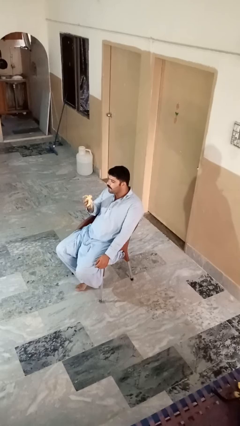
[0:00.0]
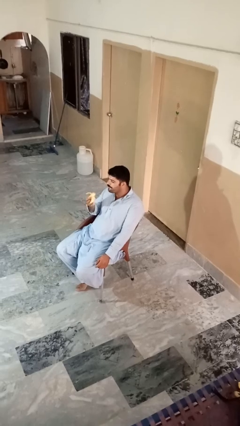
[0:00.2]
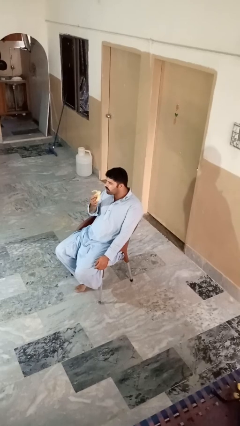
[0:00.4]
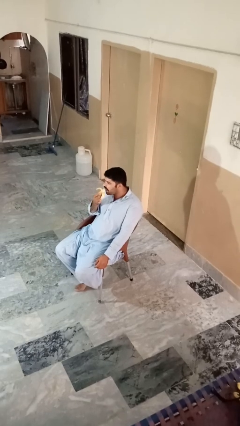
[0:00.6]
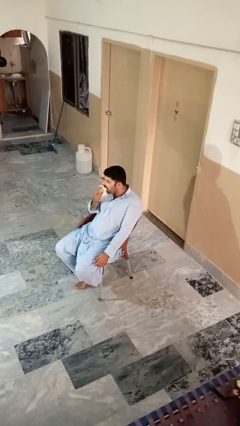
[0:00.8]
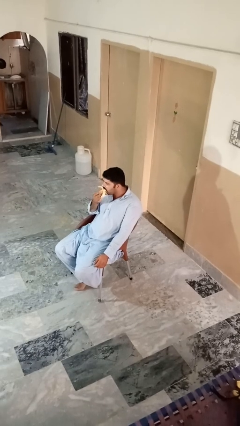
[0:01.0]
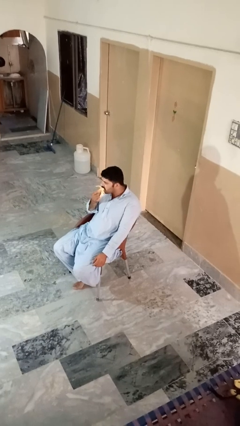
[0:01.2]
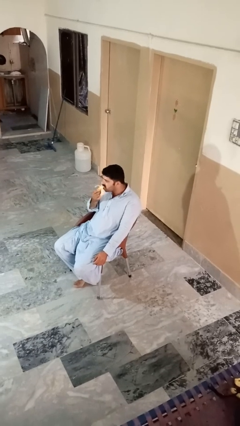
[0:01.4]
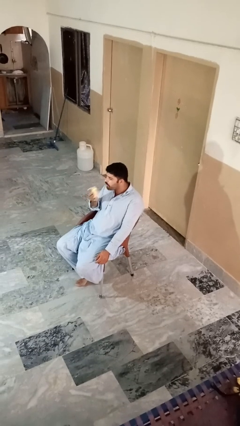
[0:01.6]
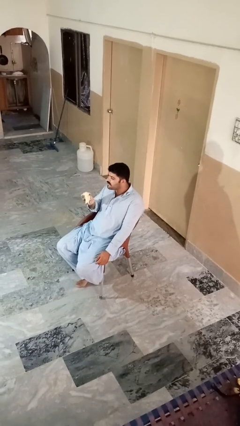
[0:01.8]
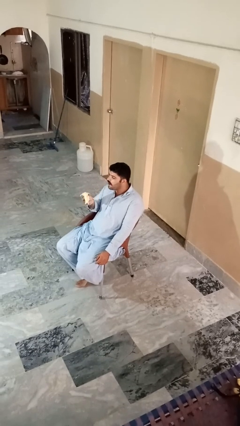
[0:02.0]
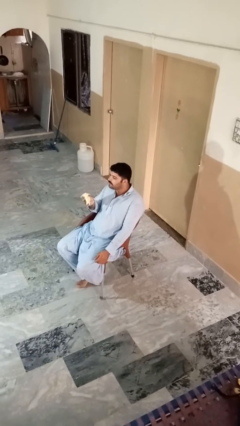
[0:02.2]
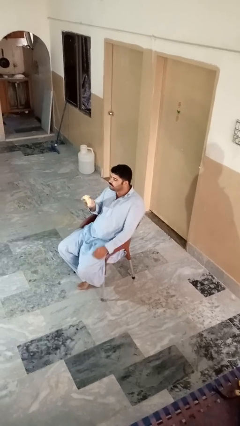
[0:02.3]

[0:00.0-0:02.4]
person eats banana

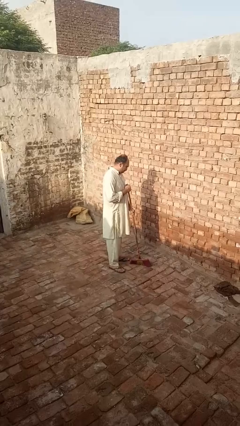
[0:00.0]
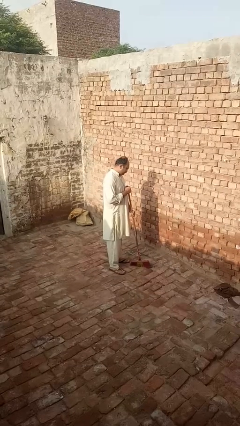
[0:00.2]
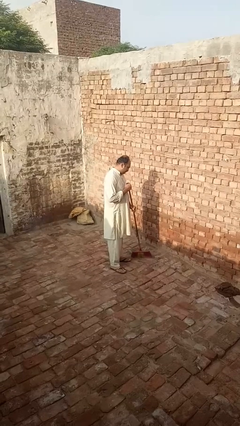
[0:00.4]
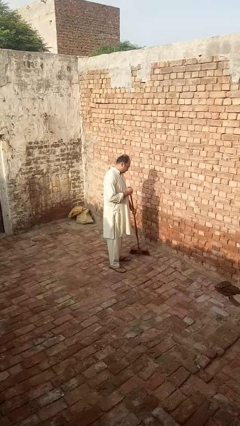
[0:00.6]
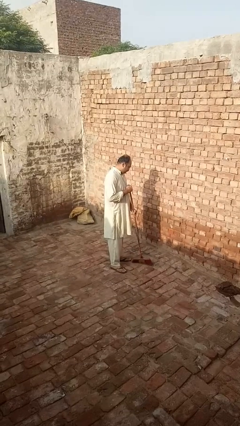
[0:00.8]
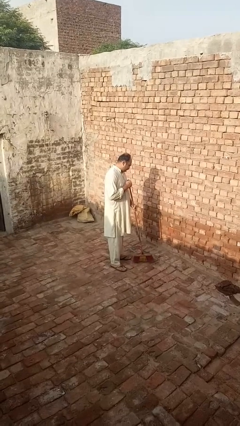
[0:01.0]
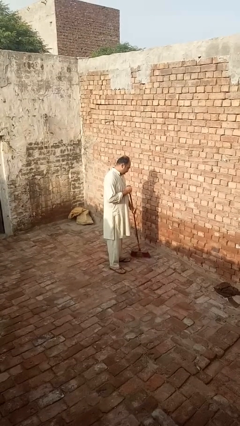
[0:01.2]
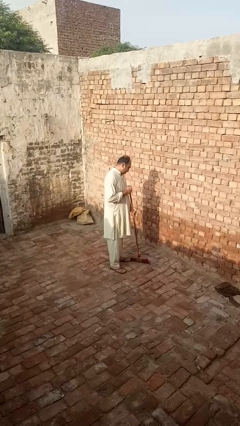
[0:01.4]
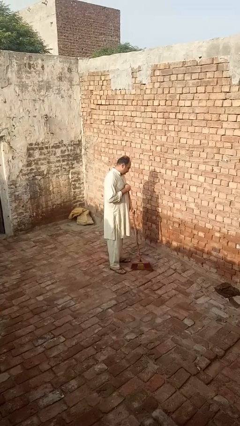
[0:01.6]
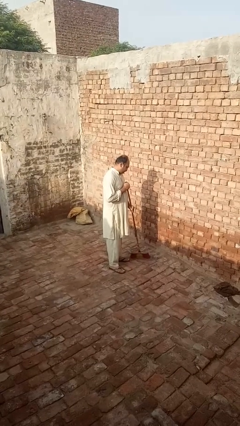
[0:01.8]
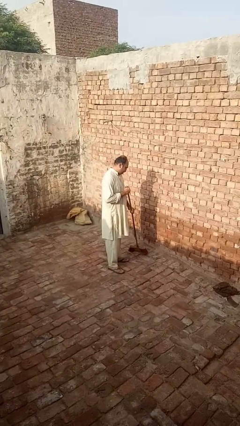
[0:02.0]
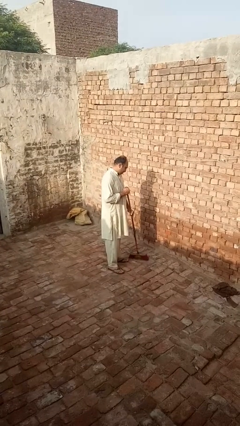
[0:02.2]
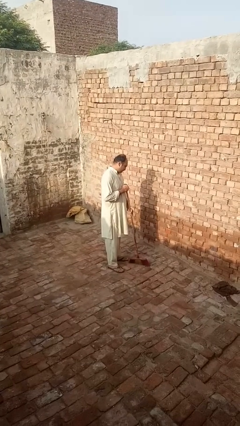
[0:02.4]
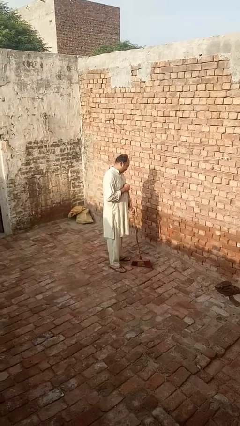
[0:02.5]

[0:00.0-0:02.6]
person sweeps floor

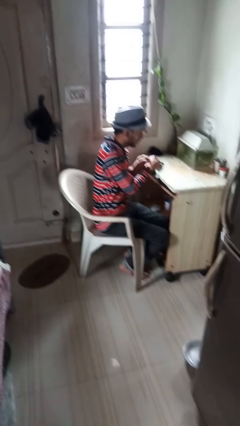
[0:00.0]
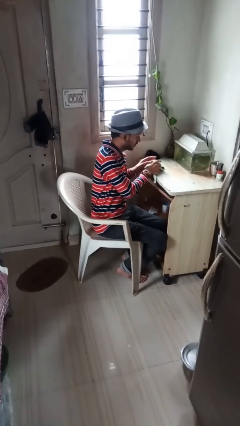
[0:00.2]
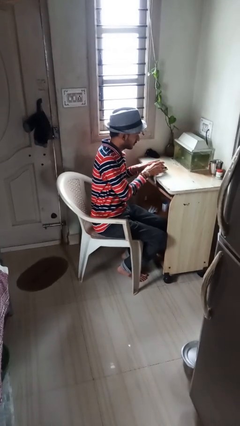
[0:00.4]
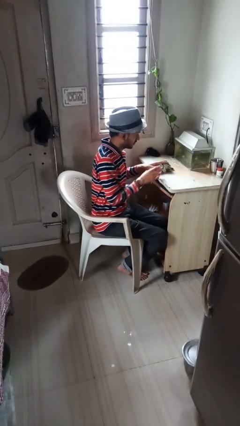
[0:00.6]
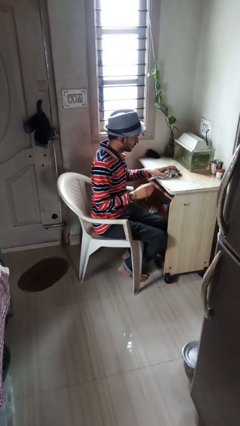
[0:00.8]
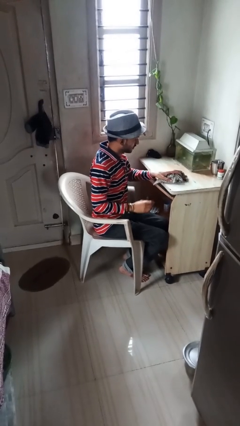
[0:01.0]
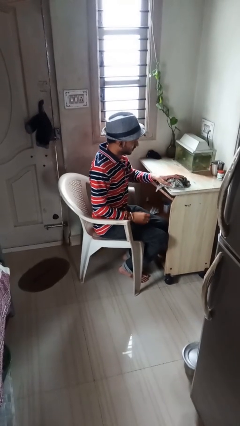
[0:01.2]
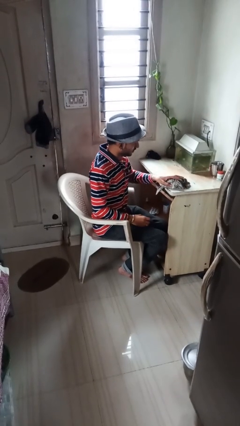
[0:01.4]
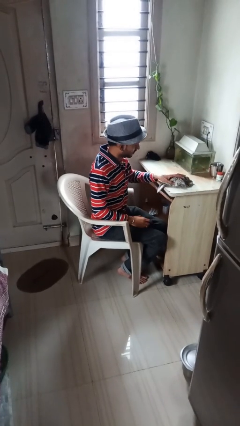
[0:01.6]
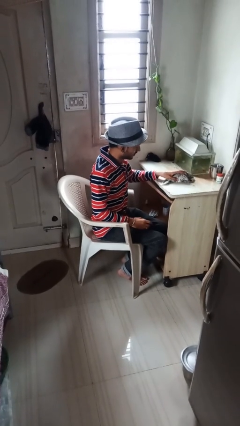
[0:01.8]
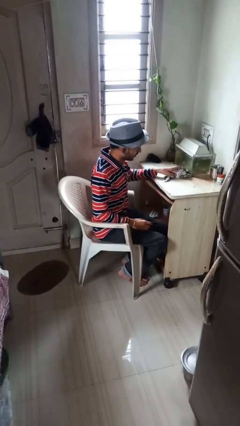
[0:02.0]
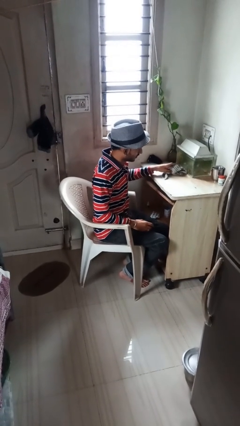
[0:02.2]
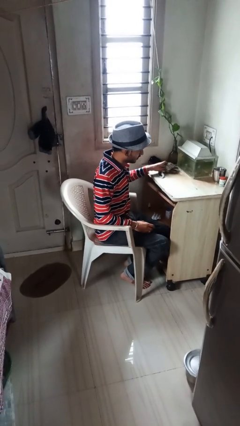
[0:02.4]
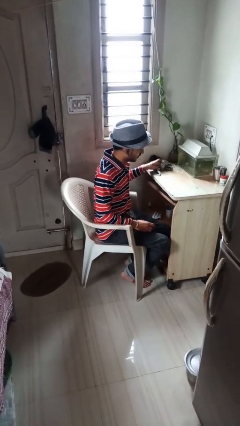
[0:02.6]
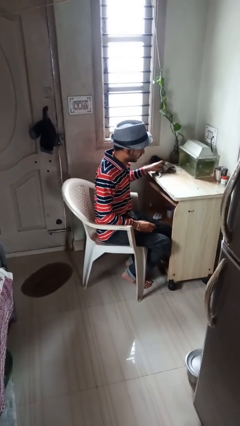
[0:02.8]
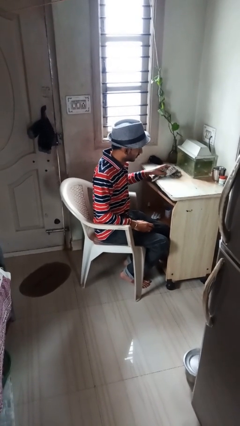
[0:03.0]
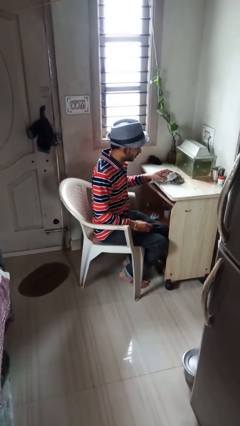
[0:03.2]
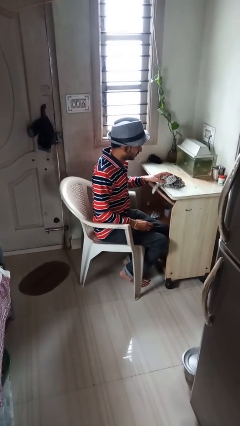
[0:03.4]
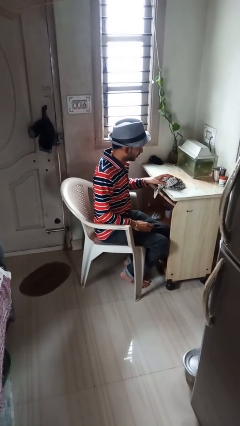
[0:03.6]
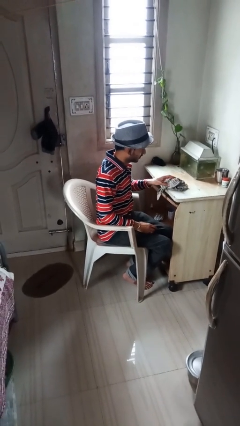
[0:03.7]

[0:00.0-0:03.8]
person cleans table with rag

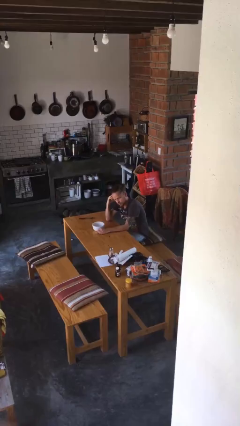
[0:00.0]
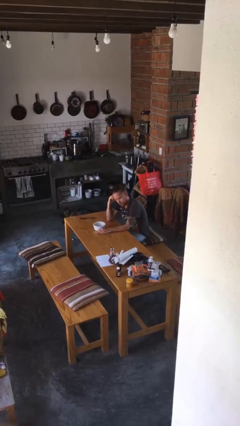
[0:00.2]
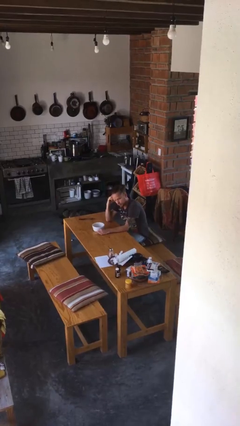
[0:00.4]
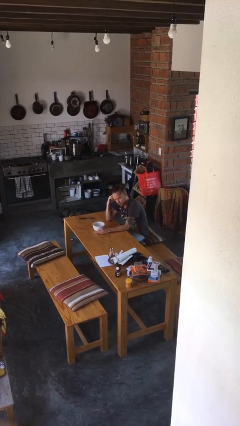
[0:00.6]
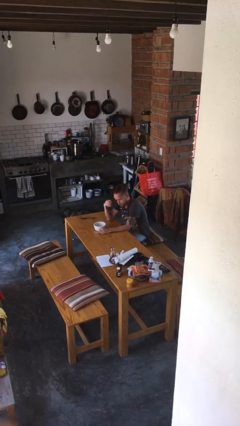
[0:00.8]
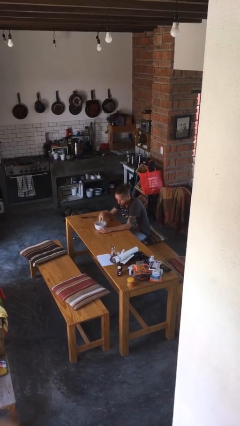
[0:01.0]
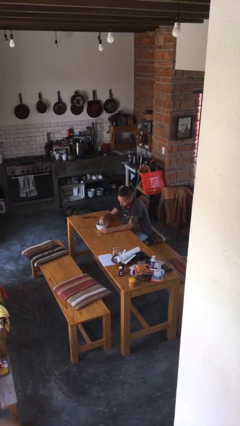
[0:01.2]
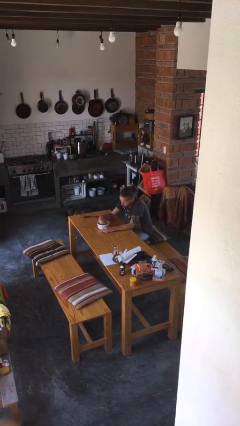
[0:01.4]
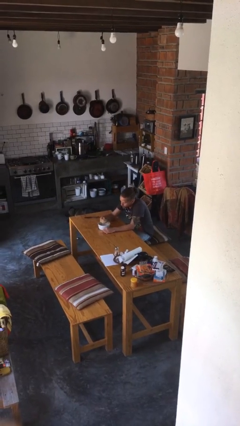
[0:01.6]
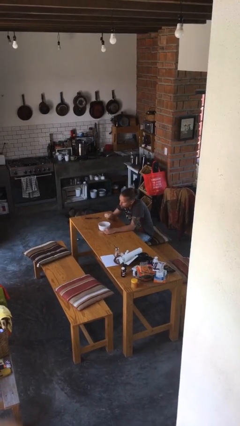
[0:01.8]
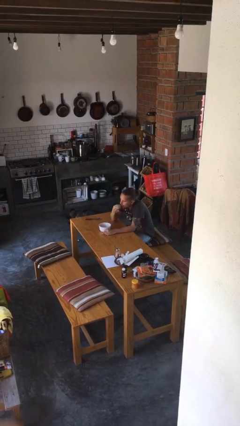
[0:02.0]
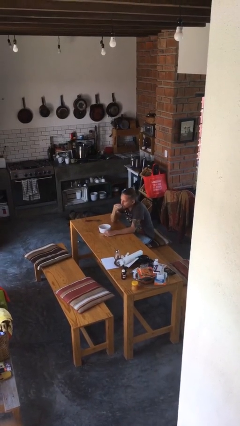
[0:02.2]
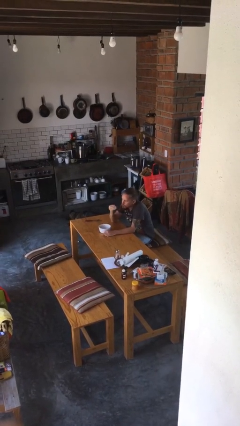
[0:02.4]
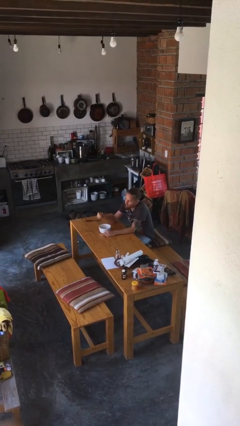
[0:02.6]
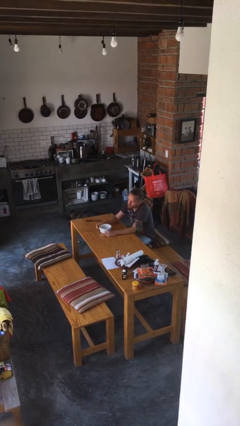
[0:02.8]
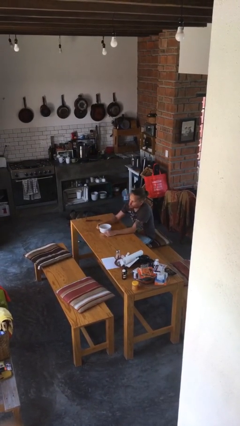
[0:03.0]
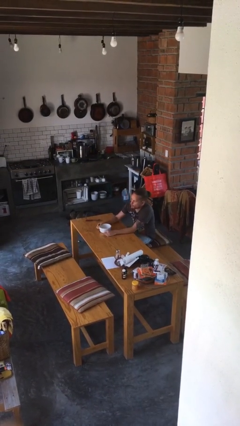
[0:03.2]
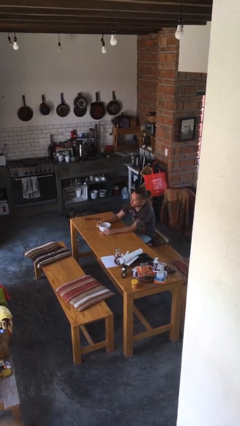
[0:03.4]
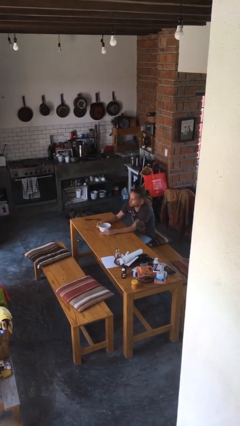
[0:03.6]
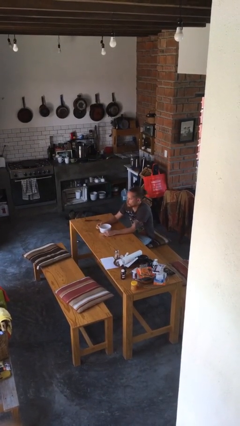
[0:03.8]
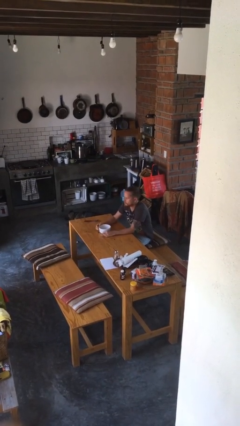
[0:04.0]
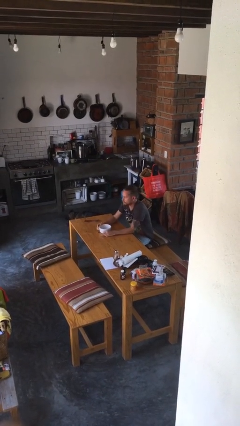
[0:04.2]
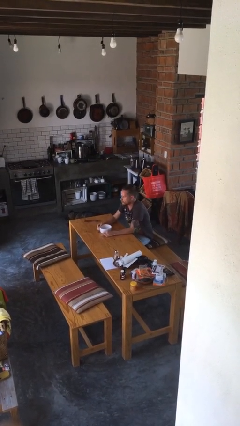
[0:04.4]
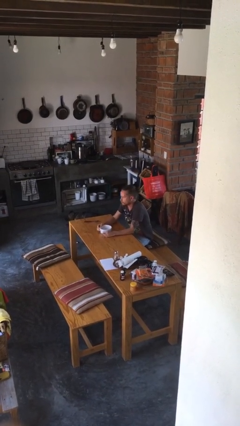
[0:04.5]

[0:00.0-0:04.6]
person eats with hands

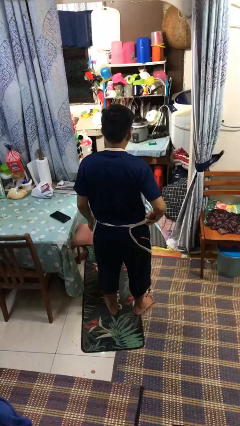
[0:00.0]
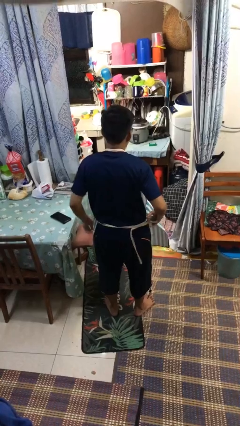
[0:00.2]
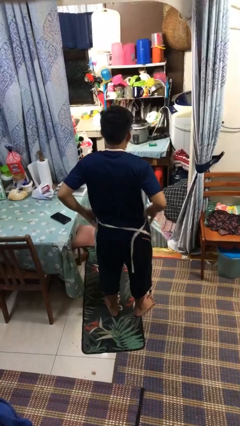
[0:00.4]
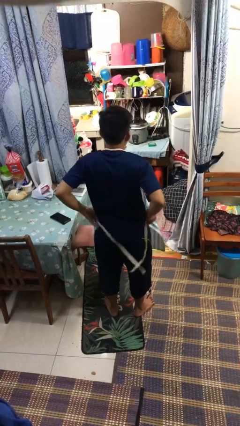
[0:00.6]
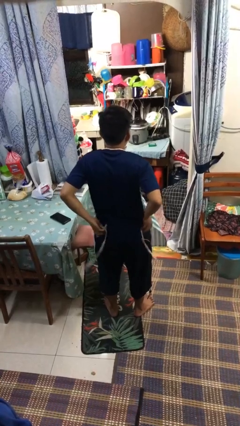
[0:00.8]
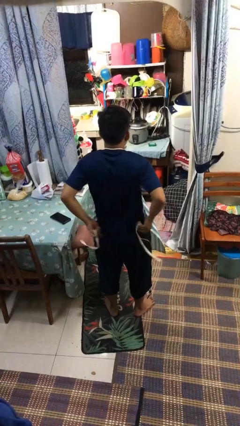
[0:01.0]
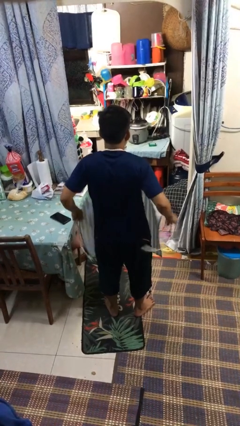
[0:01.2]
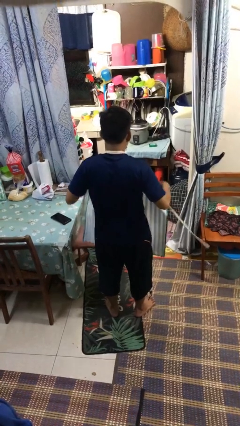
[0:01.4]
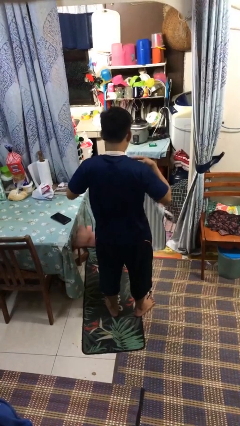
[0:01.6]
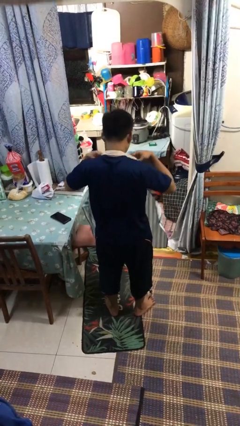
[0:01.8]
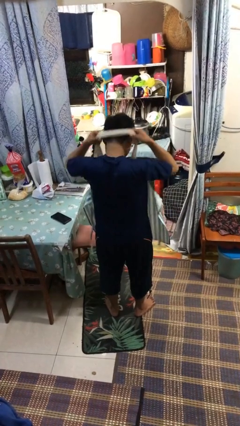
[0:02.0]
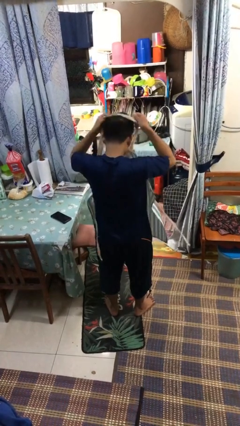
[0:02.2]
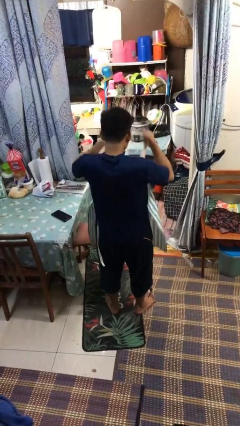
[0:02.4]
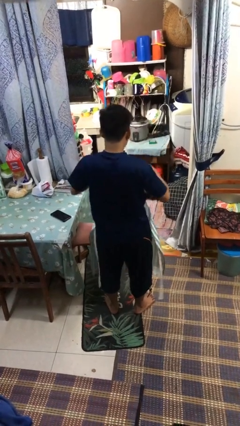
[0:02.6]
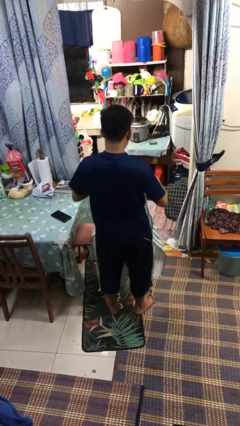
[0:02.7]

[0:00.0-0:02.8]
person takes off apron

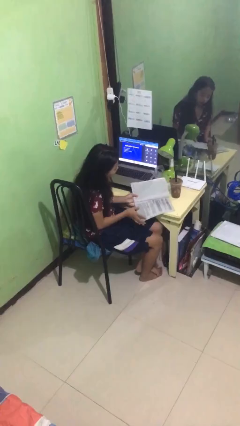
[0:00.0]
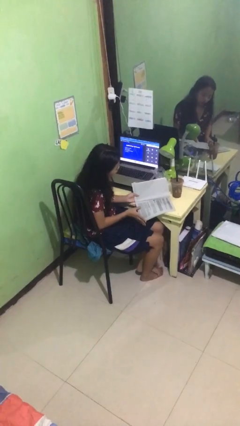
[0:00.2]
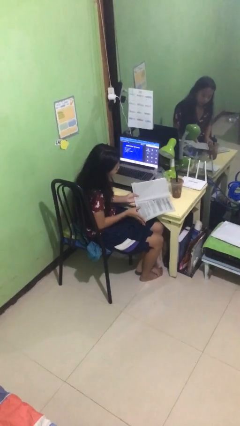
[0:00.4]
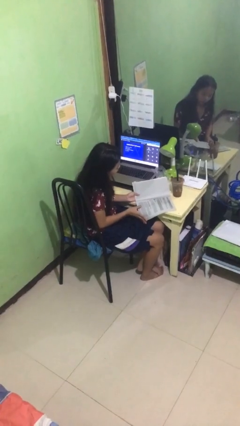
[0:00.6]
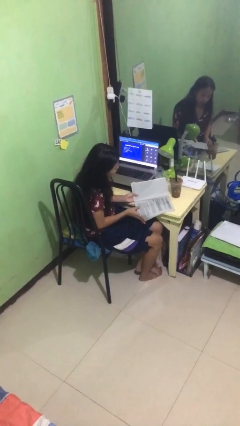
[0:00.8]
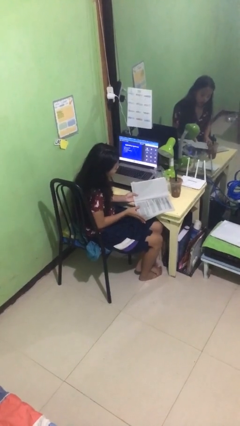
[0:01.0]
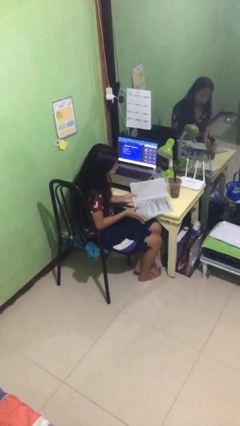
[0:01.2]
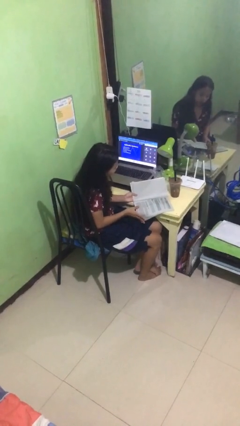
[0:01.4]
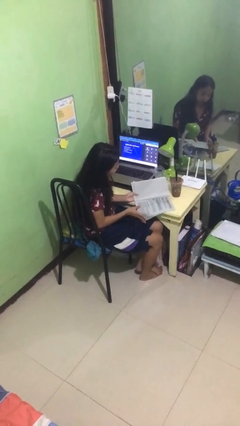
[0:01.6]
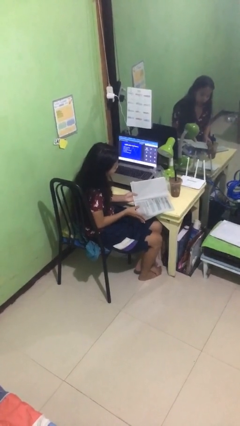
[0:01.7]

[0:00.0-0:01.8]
person reads document
